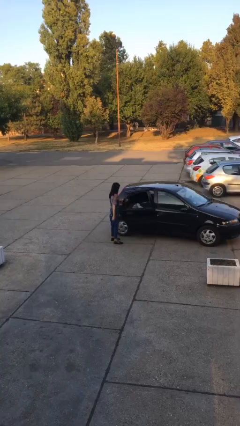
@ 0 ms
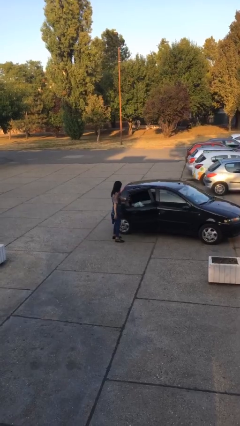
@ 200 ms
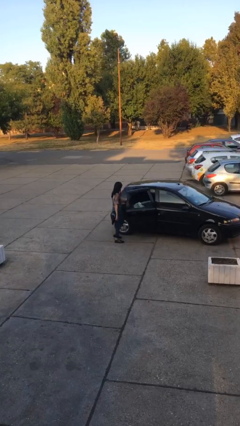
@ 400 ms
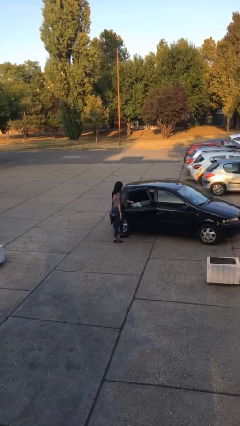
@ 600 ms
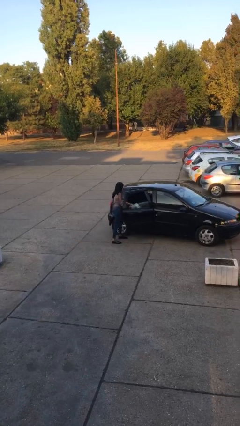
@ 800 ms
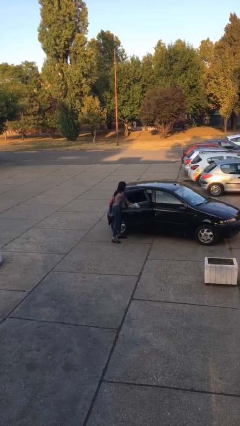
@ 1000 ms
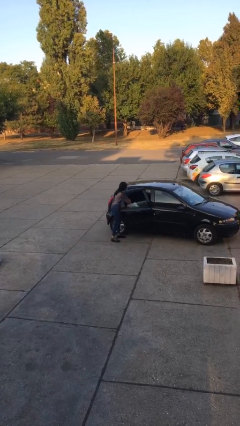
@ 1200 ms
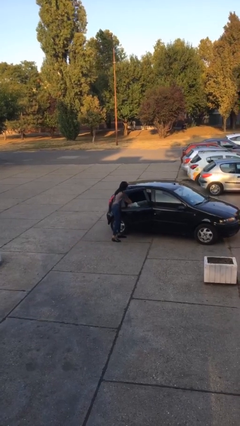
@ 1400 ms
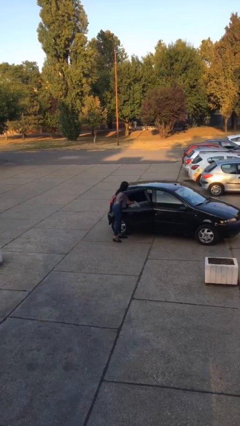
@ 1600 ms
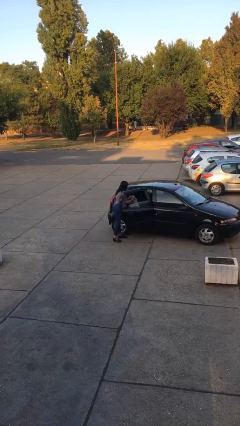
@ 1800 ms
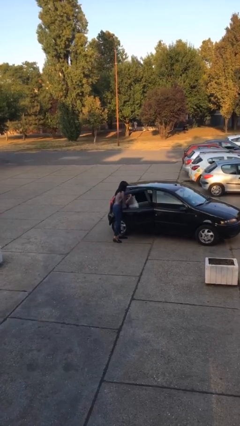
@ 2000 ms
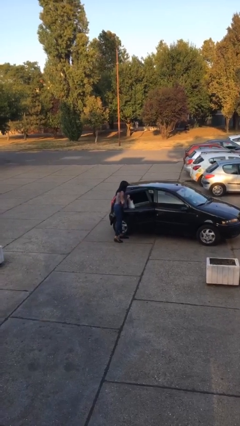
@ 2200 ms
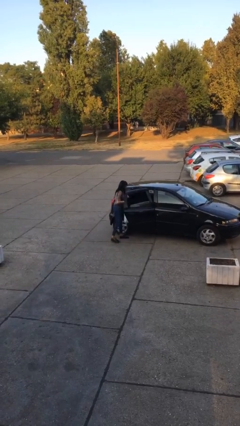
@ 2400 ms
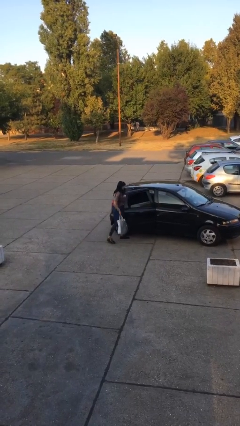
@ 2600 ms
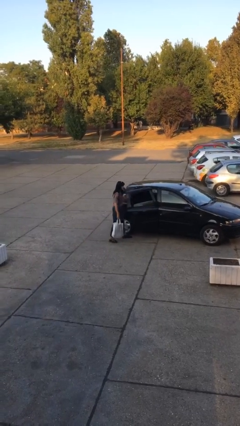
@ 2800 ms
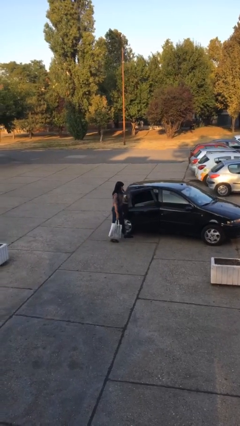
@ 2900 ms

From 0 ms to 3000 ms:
person unloads car

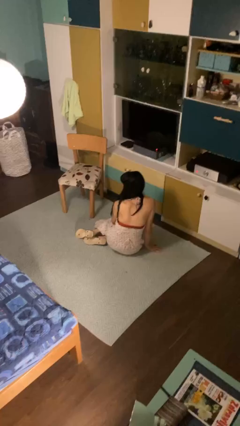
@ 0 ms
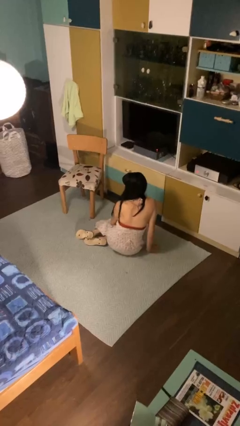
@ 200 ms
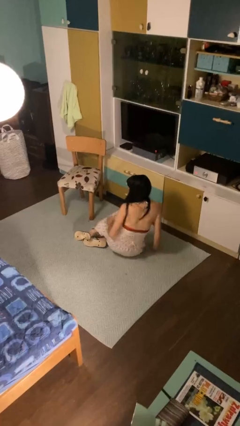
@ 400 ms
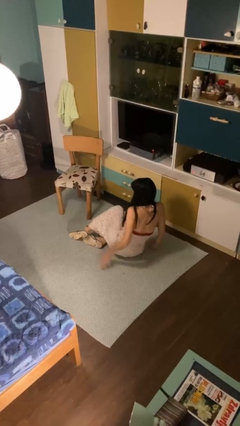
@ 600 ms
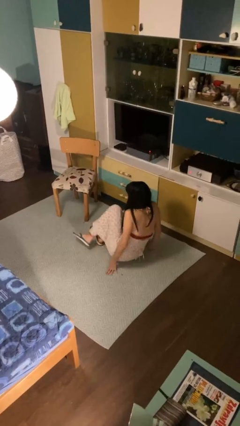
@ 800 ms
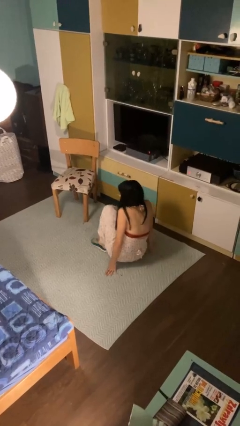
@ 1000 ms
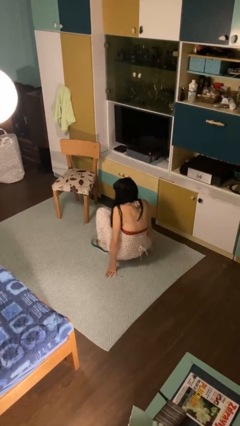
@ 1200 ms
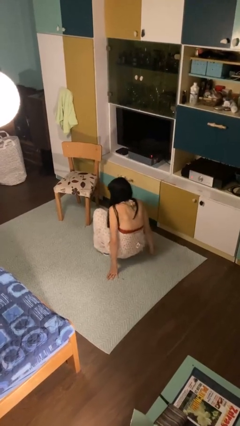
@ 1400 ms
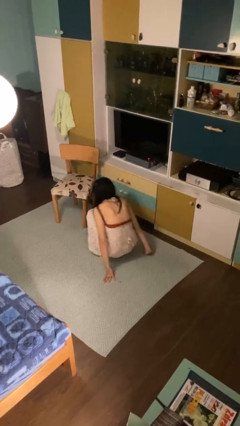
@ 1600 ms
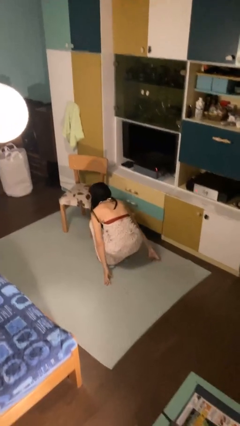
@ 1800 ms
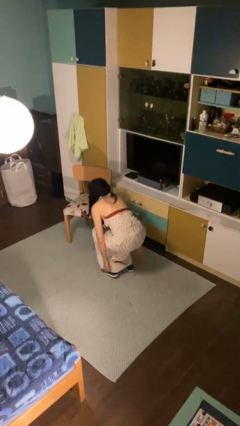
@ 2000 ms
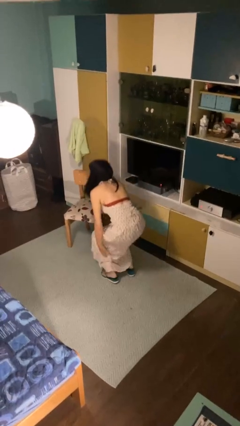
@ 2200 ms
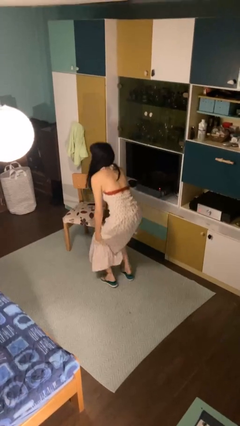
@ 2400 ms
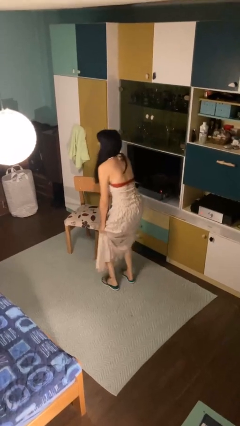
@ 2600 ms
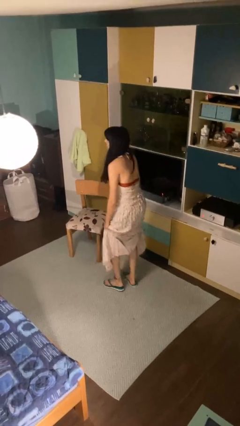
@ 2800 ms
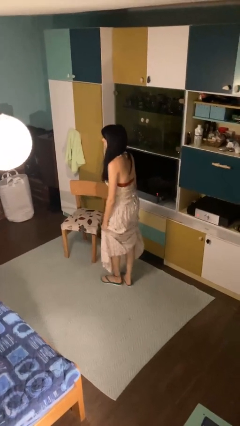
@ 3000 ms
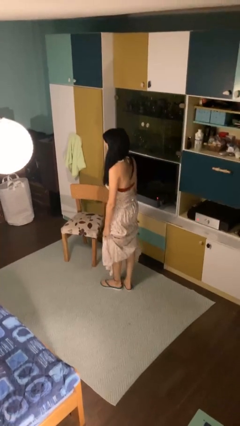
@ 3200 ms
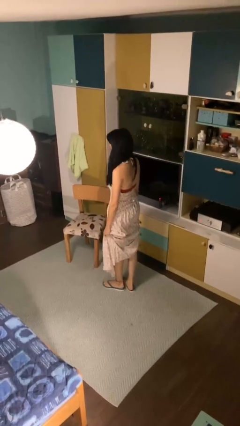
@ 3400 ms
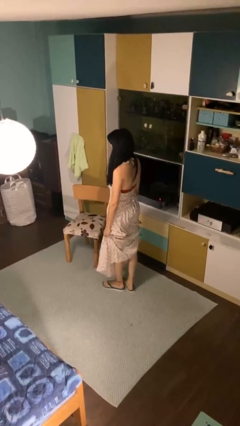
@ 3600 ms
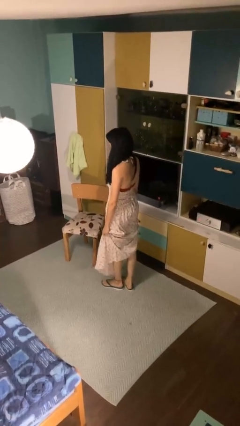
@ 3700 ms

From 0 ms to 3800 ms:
person stands up from floor

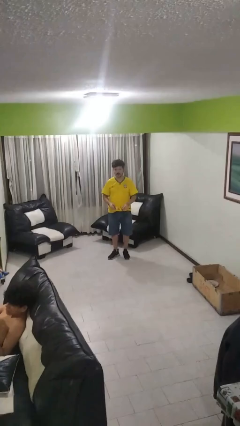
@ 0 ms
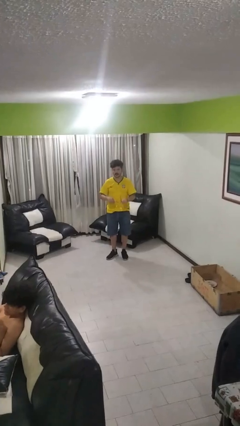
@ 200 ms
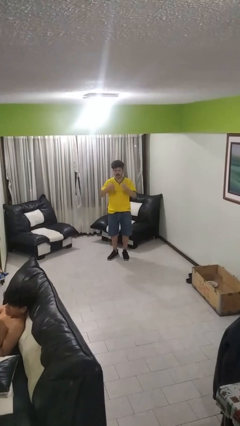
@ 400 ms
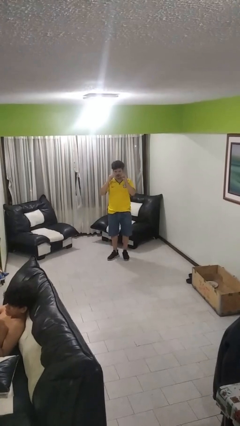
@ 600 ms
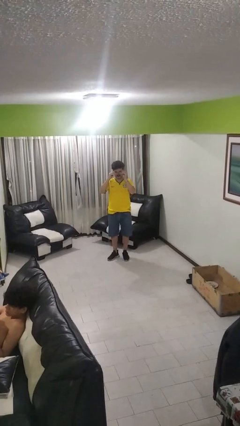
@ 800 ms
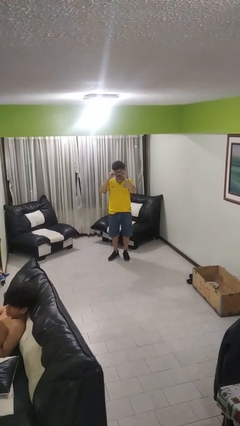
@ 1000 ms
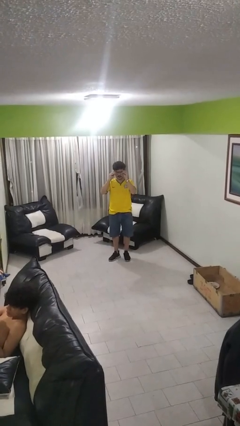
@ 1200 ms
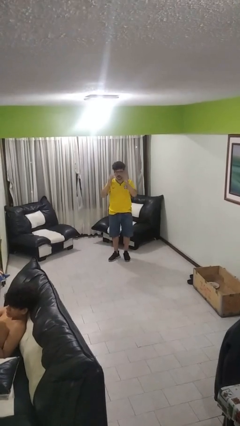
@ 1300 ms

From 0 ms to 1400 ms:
person puts on glasses

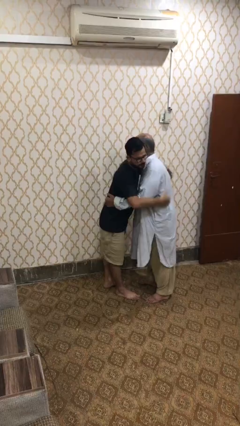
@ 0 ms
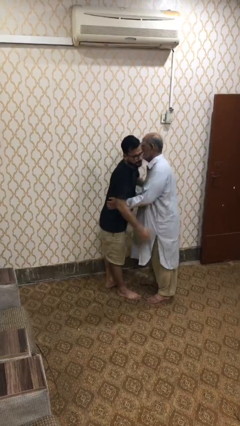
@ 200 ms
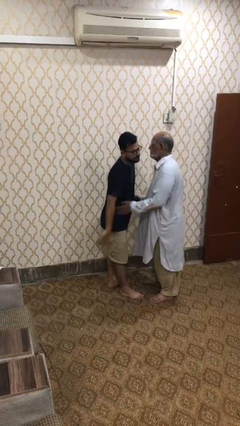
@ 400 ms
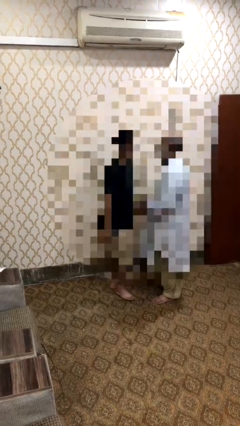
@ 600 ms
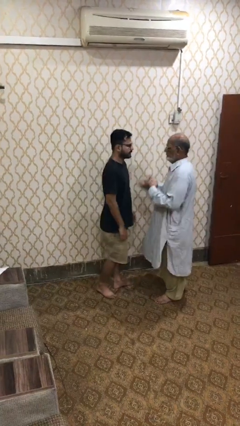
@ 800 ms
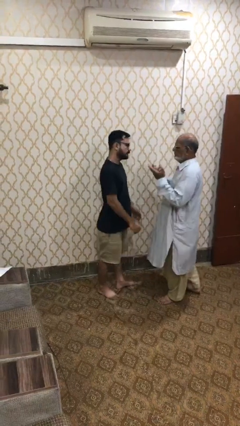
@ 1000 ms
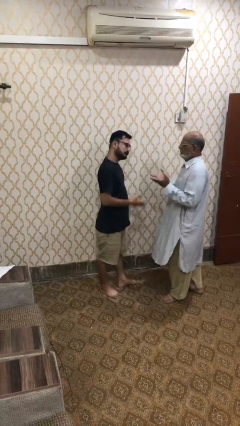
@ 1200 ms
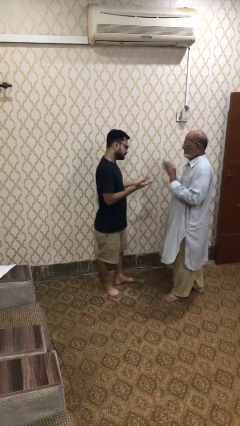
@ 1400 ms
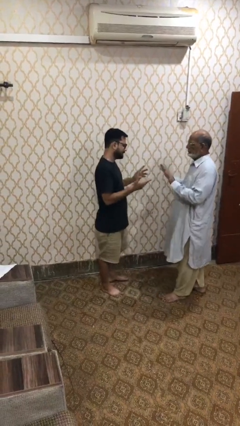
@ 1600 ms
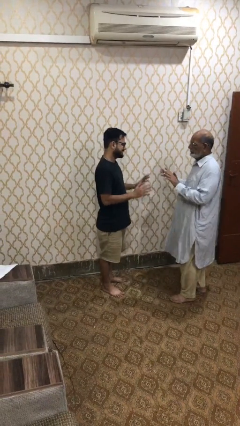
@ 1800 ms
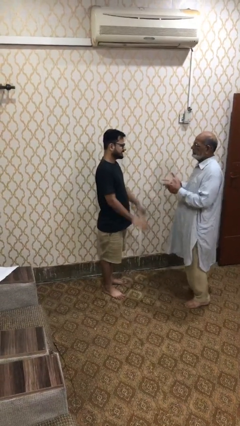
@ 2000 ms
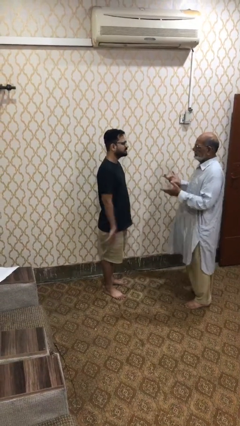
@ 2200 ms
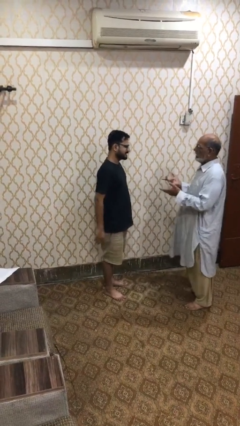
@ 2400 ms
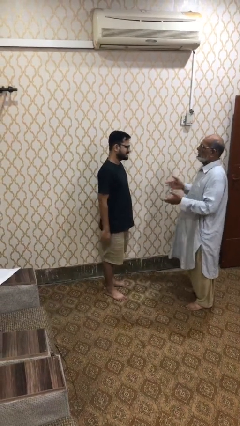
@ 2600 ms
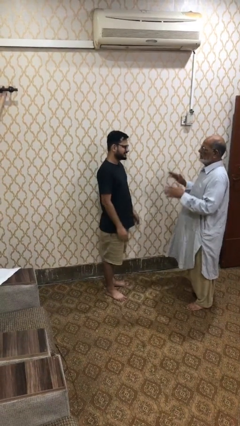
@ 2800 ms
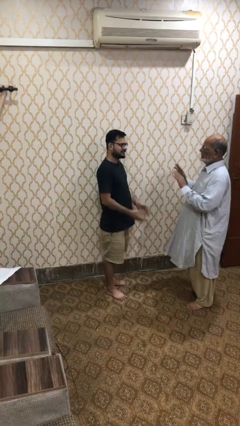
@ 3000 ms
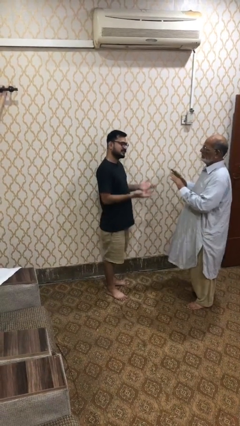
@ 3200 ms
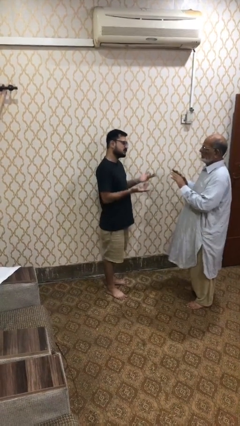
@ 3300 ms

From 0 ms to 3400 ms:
person talks to person

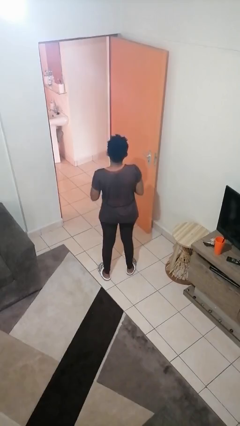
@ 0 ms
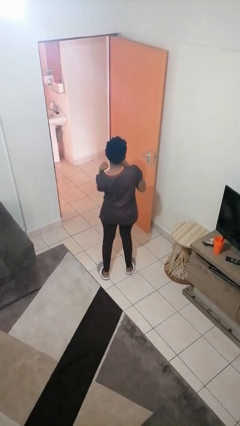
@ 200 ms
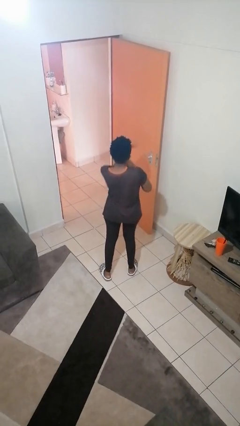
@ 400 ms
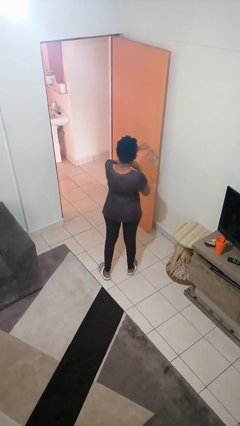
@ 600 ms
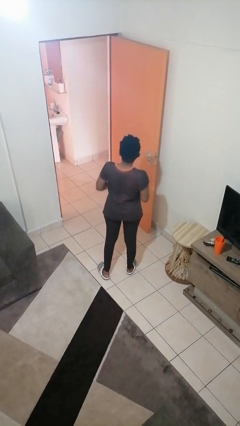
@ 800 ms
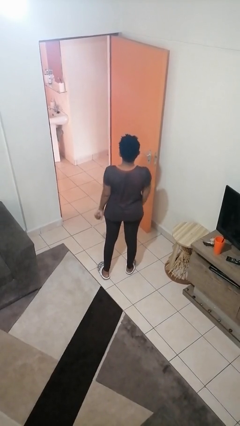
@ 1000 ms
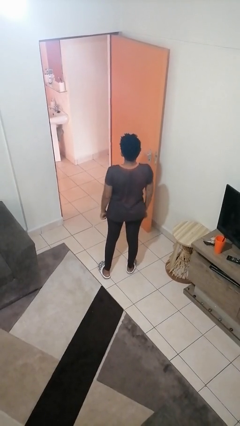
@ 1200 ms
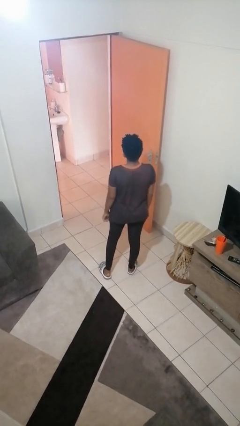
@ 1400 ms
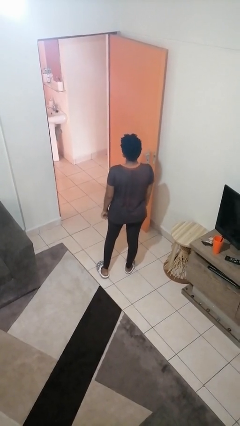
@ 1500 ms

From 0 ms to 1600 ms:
person punches

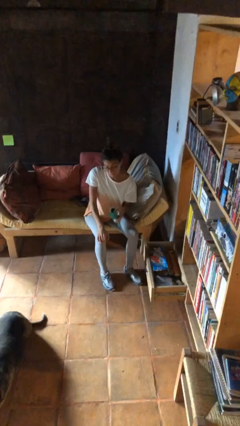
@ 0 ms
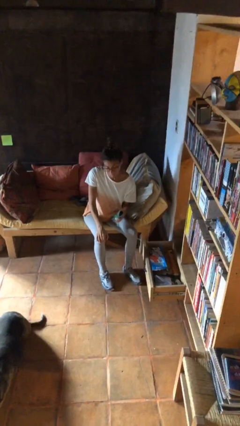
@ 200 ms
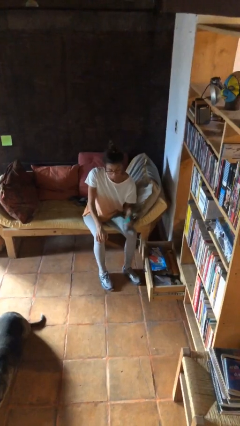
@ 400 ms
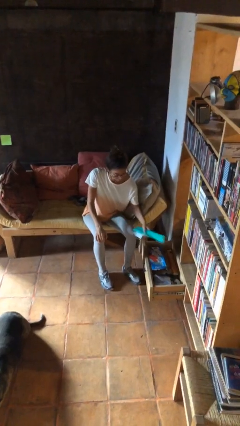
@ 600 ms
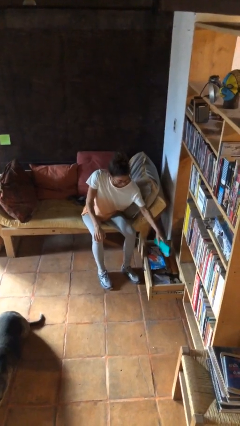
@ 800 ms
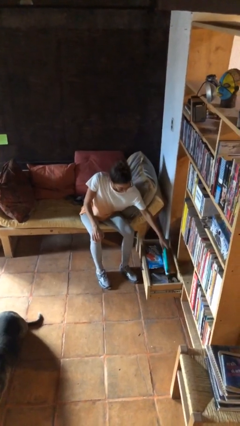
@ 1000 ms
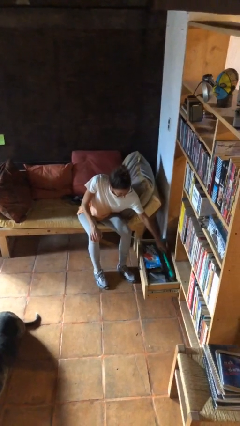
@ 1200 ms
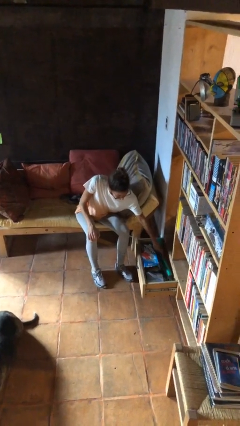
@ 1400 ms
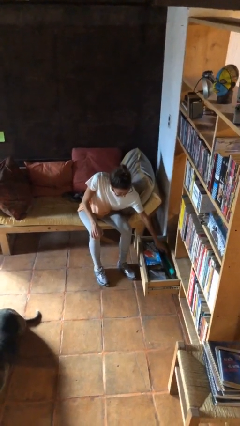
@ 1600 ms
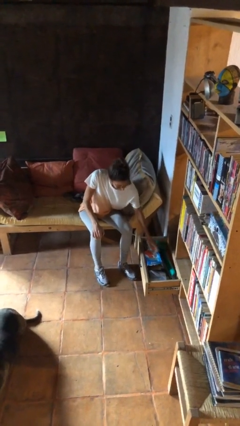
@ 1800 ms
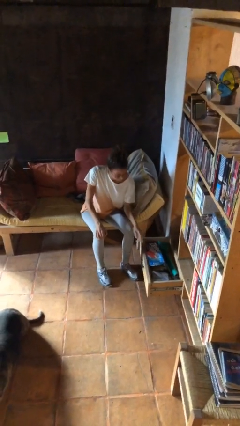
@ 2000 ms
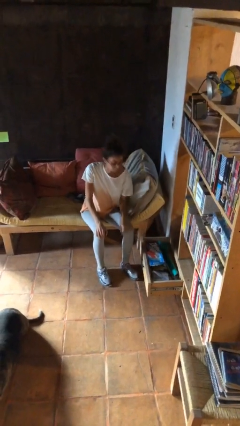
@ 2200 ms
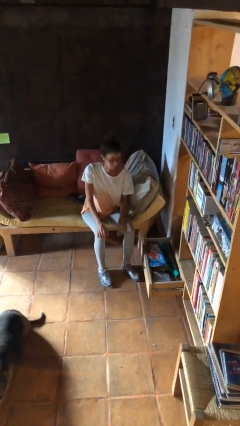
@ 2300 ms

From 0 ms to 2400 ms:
person puts down object into cabinet

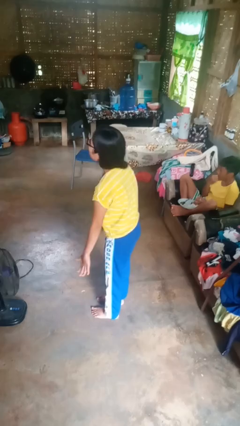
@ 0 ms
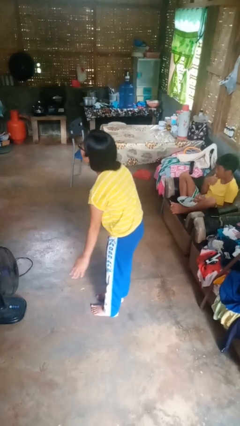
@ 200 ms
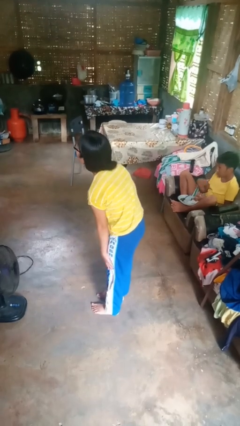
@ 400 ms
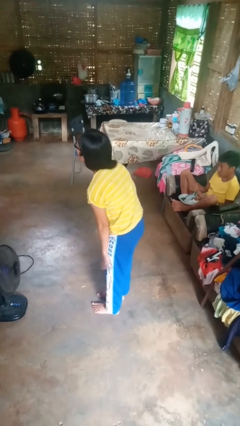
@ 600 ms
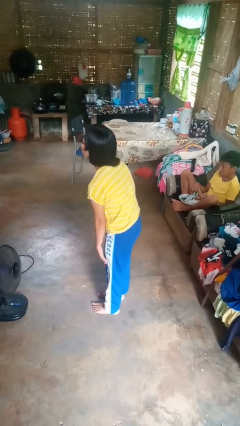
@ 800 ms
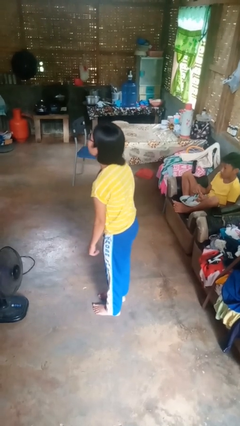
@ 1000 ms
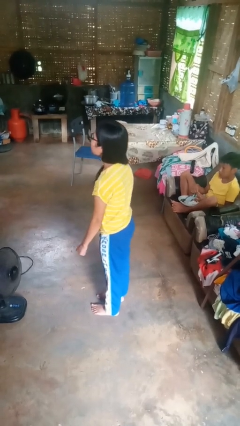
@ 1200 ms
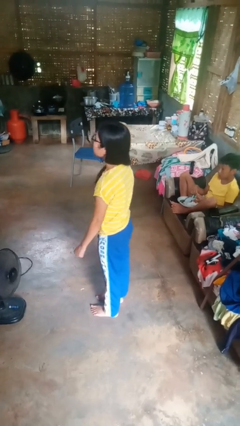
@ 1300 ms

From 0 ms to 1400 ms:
person slaps hands on thighs

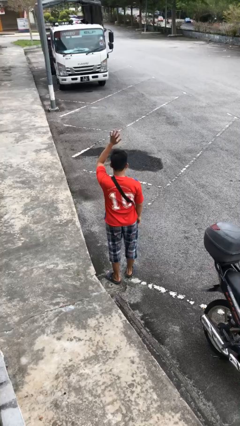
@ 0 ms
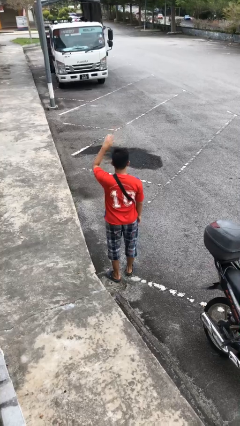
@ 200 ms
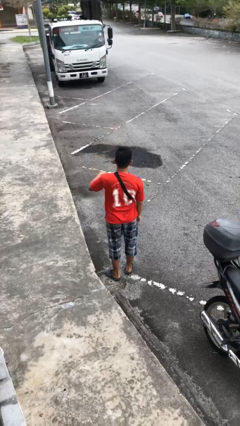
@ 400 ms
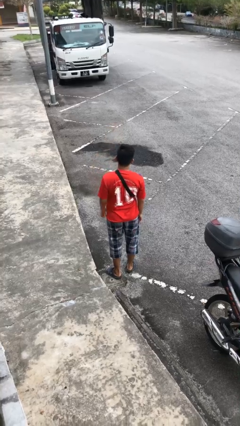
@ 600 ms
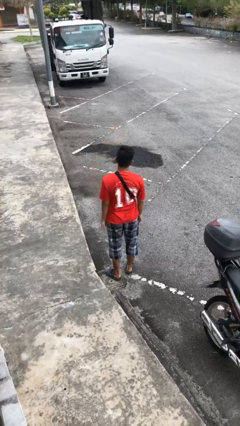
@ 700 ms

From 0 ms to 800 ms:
person gestures lower hand
